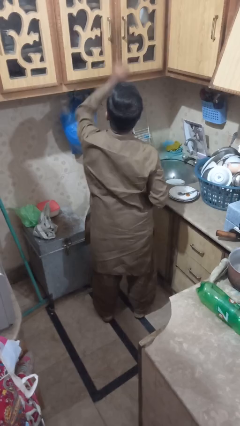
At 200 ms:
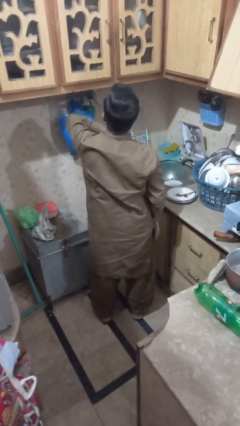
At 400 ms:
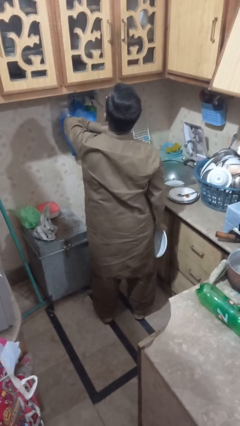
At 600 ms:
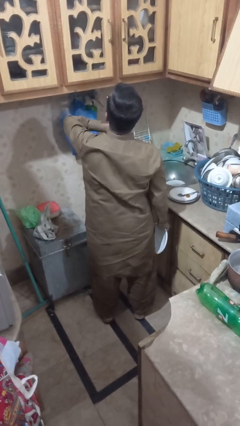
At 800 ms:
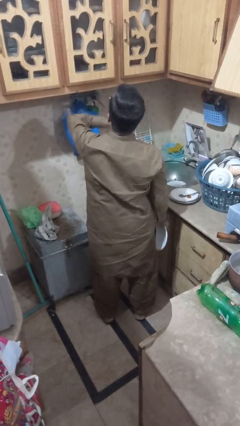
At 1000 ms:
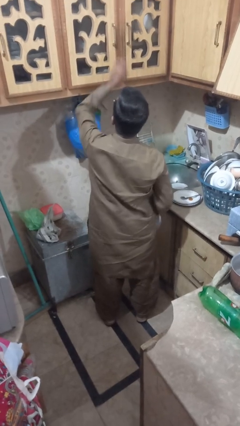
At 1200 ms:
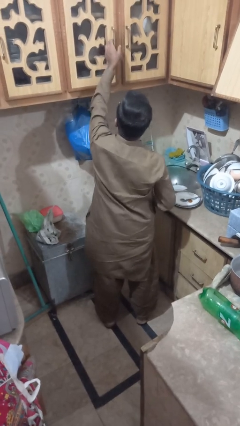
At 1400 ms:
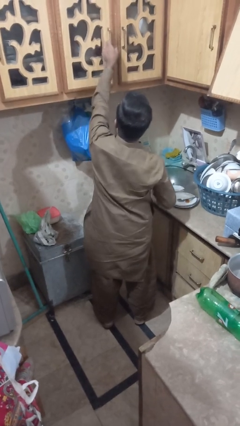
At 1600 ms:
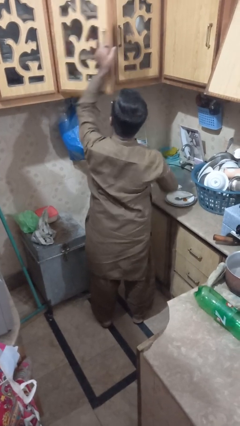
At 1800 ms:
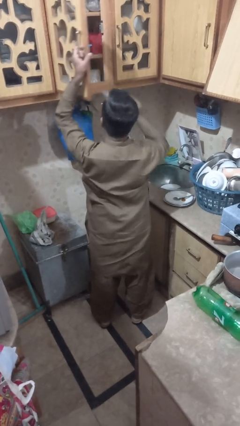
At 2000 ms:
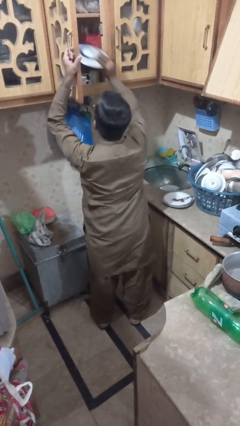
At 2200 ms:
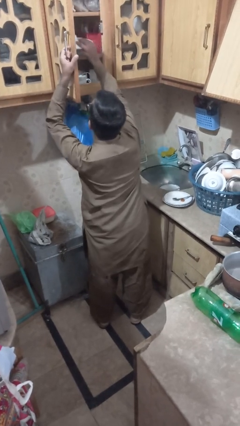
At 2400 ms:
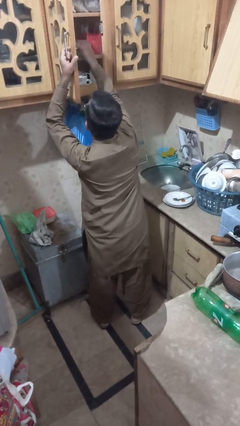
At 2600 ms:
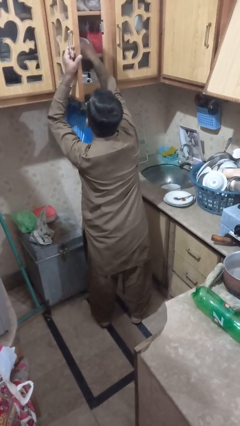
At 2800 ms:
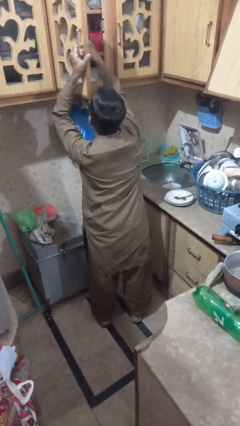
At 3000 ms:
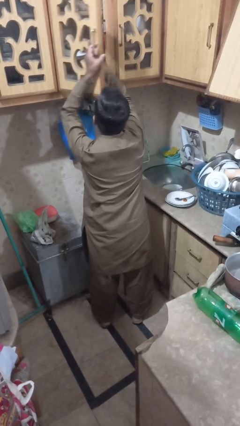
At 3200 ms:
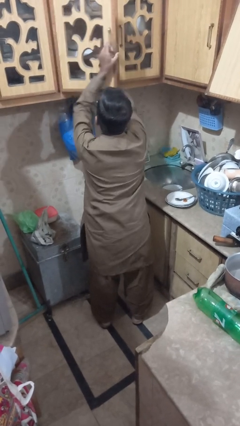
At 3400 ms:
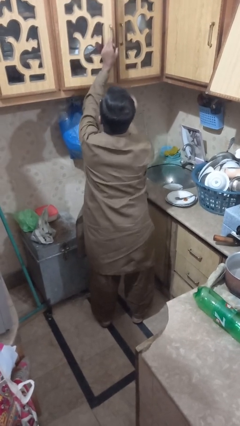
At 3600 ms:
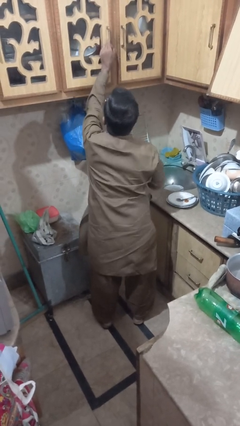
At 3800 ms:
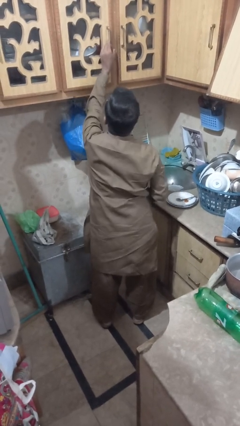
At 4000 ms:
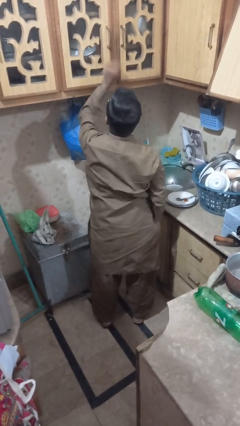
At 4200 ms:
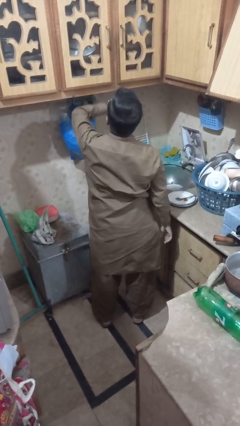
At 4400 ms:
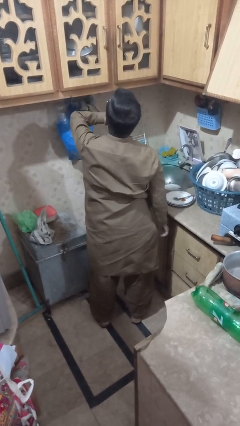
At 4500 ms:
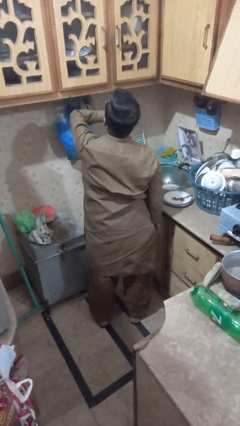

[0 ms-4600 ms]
person puts object in cabinet

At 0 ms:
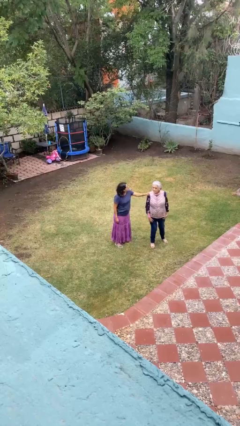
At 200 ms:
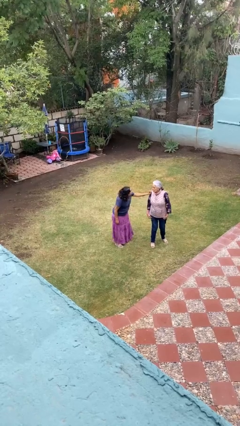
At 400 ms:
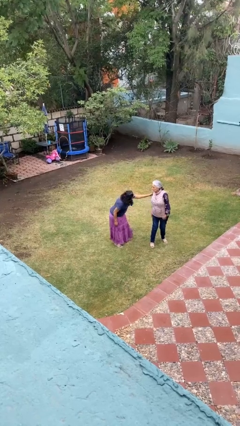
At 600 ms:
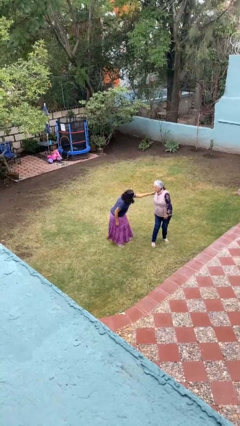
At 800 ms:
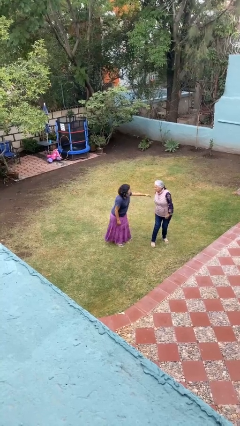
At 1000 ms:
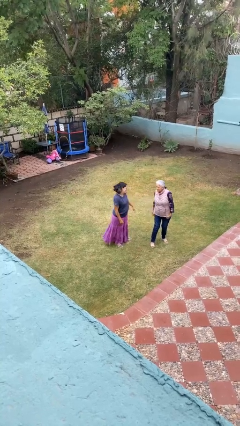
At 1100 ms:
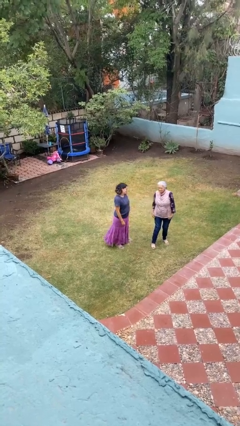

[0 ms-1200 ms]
person spins person around

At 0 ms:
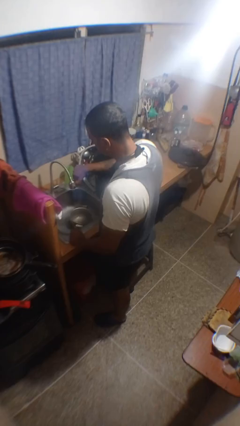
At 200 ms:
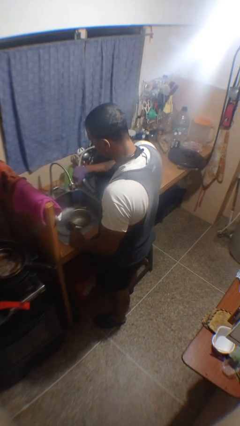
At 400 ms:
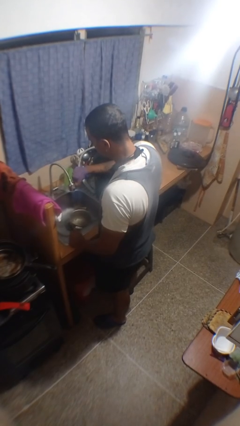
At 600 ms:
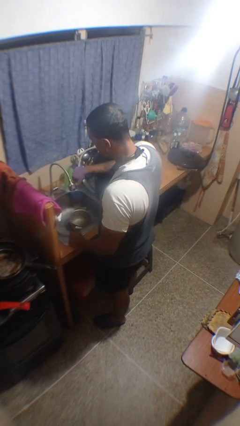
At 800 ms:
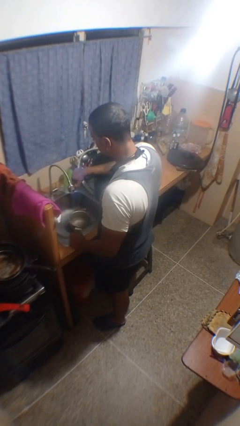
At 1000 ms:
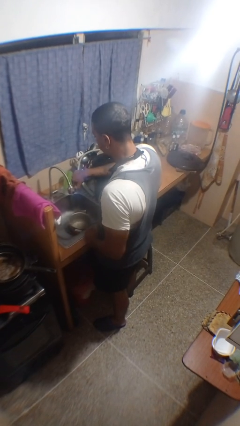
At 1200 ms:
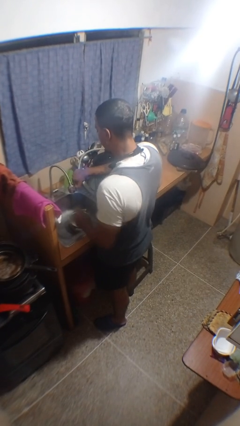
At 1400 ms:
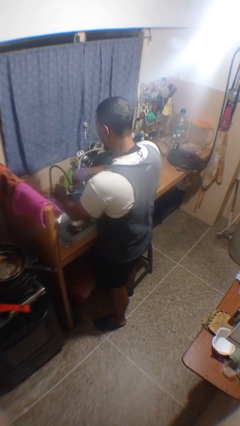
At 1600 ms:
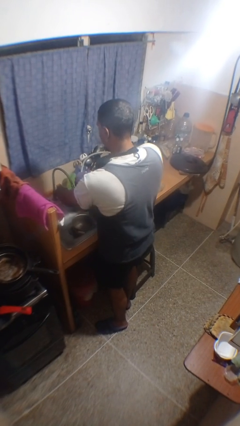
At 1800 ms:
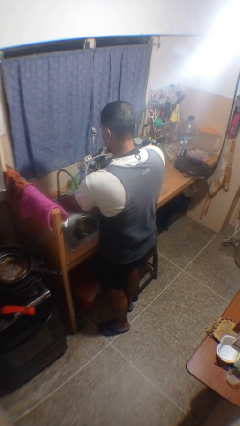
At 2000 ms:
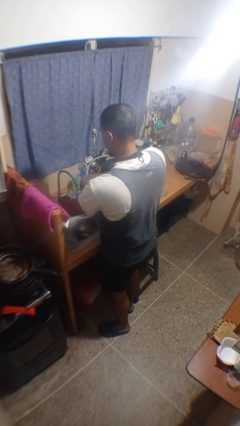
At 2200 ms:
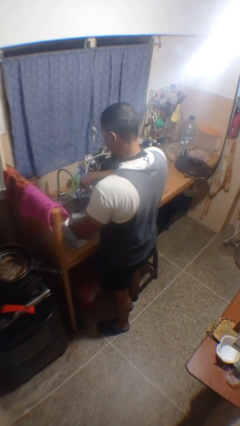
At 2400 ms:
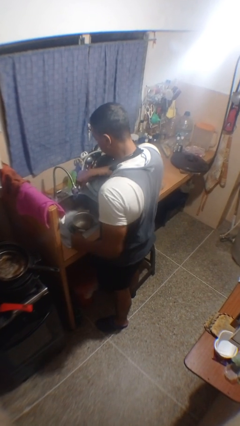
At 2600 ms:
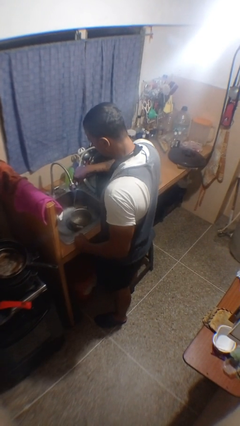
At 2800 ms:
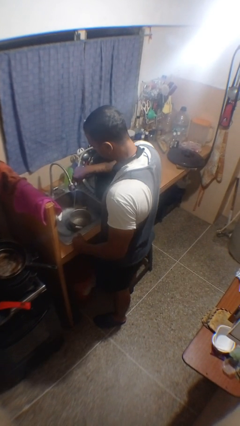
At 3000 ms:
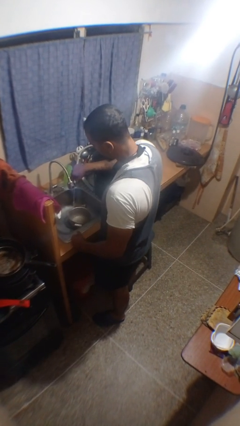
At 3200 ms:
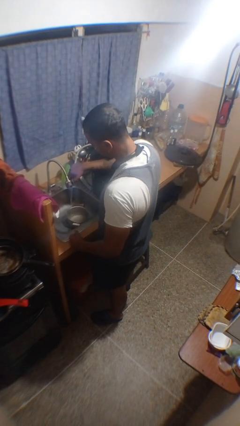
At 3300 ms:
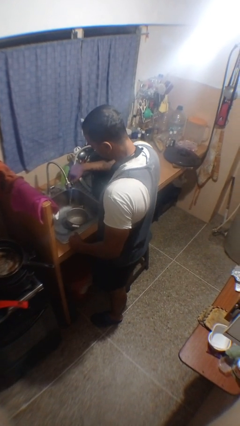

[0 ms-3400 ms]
person turns on faucet

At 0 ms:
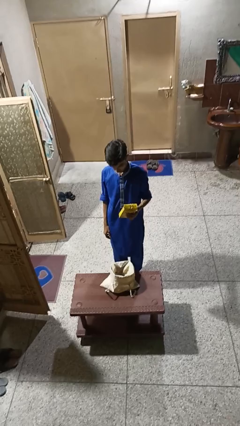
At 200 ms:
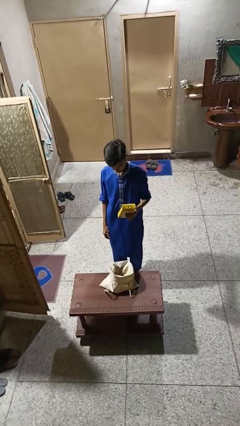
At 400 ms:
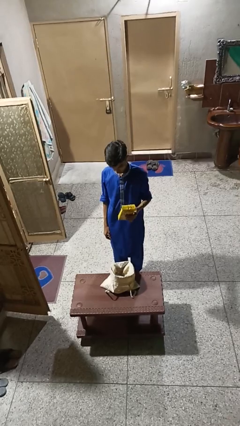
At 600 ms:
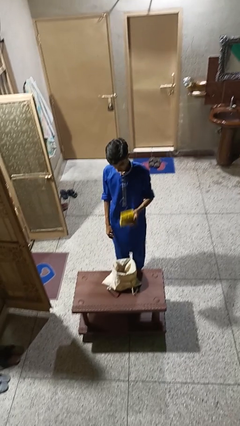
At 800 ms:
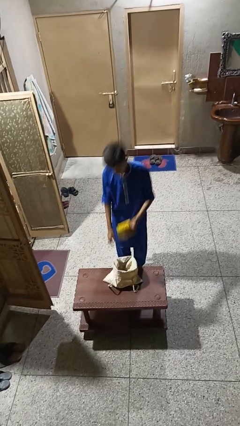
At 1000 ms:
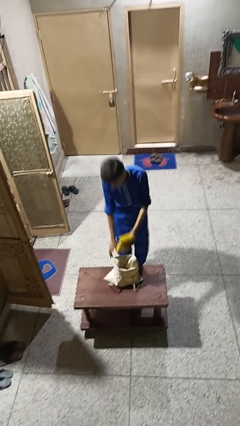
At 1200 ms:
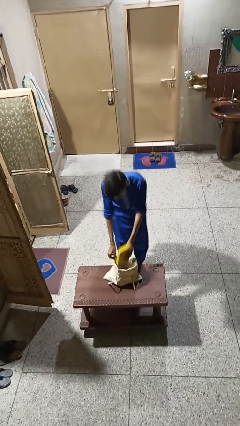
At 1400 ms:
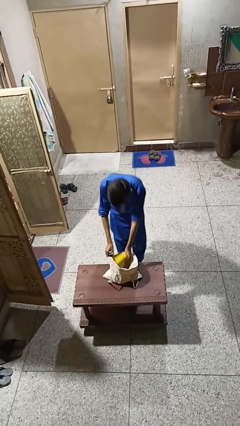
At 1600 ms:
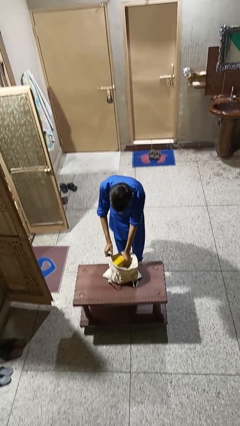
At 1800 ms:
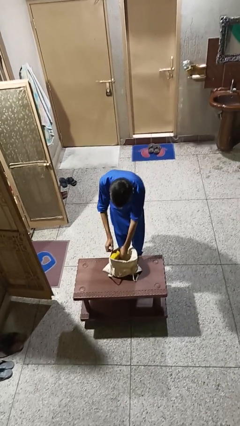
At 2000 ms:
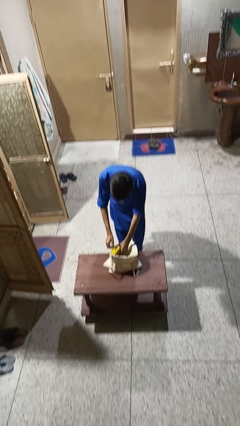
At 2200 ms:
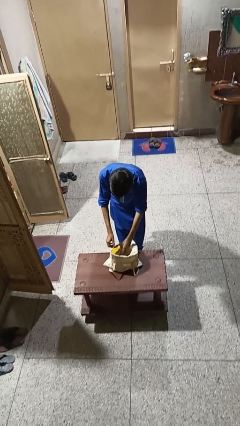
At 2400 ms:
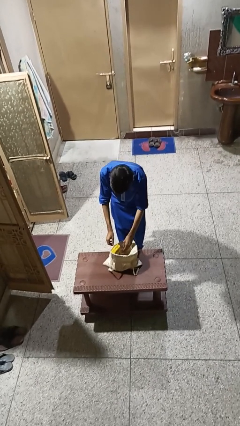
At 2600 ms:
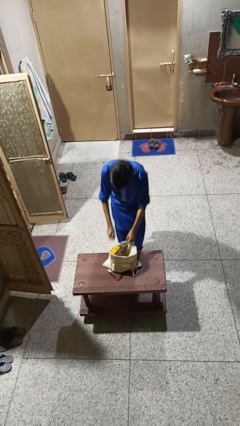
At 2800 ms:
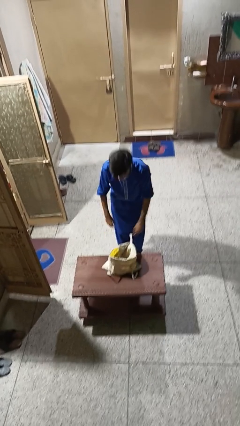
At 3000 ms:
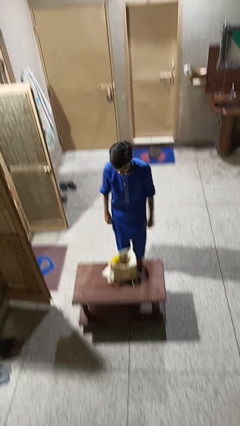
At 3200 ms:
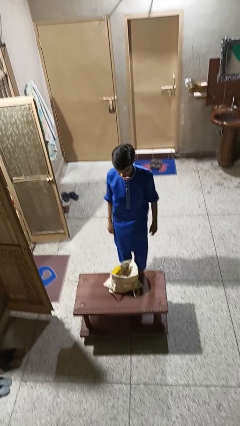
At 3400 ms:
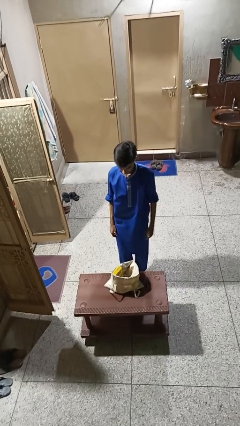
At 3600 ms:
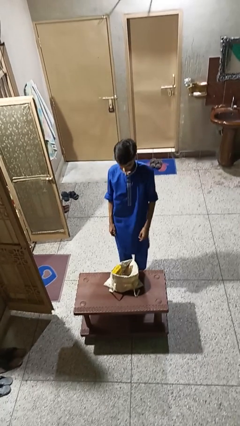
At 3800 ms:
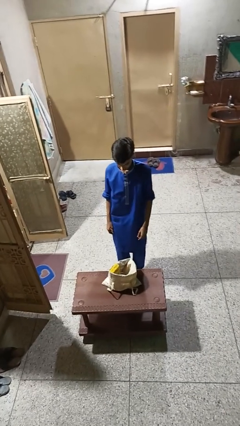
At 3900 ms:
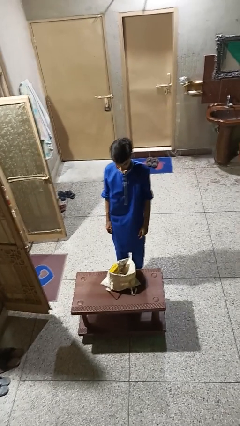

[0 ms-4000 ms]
person puts object into bag

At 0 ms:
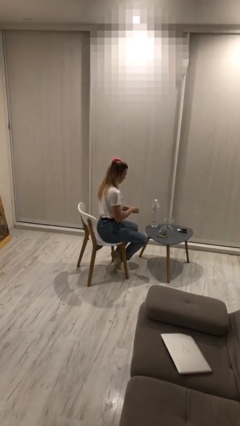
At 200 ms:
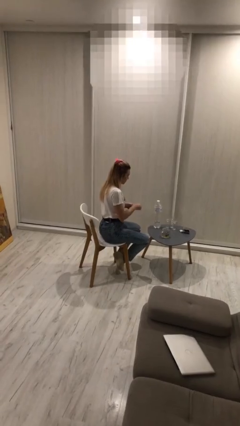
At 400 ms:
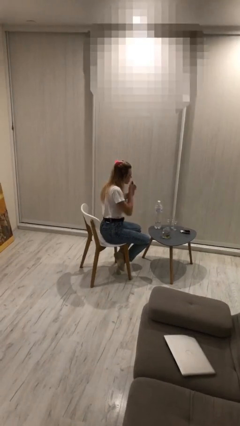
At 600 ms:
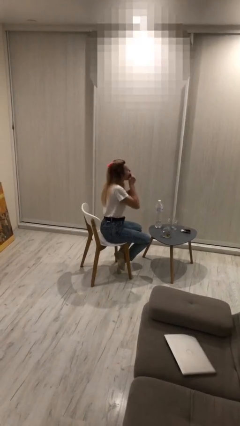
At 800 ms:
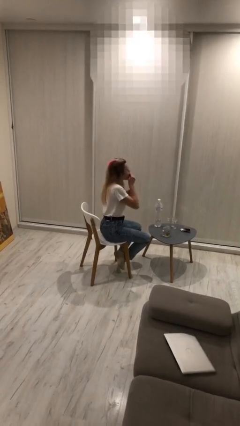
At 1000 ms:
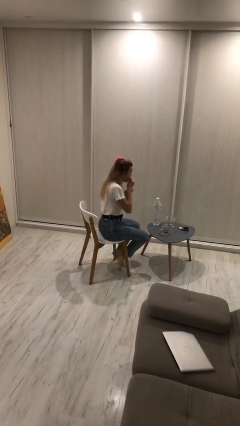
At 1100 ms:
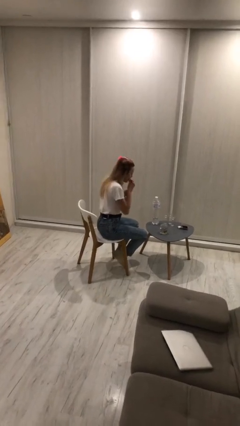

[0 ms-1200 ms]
person takes medicine pills

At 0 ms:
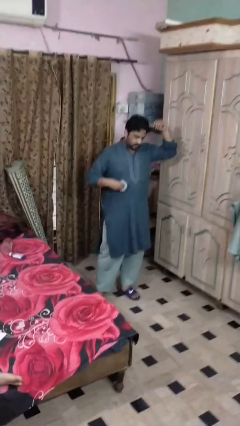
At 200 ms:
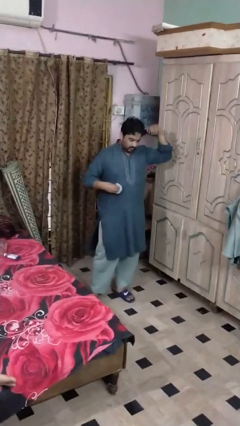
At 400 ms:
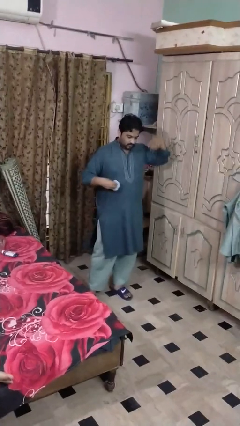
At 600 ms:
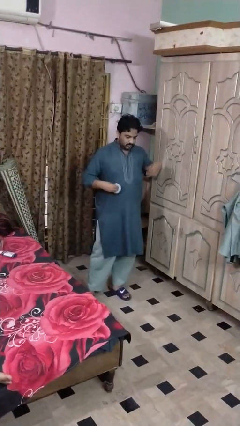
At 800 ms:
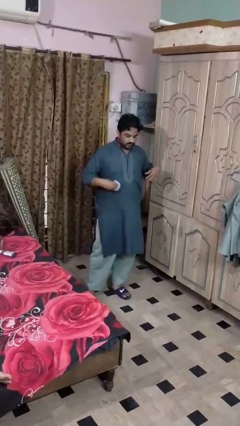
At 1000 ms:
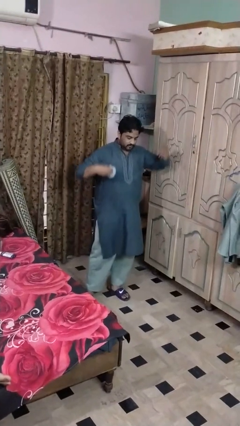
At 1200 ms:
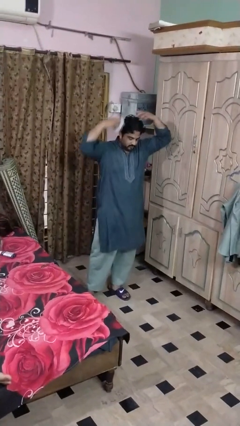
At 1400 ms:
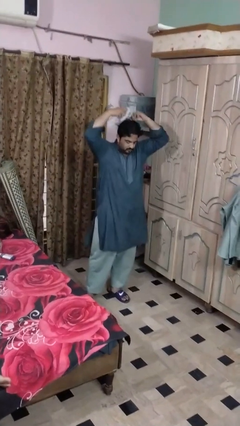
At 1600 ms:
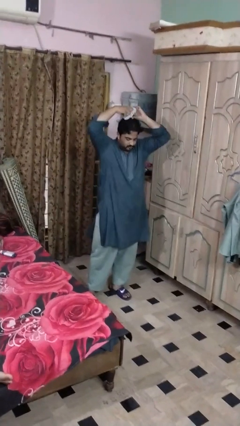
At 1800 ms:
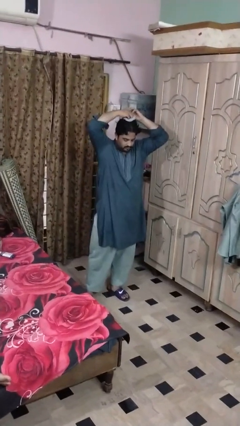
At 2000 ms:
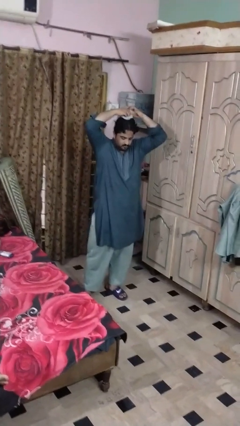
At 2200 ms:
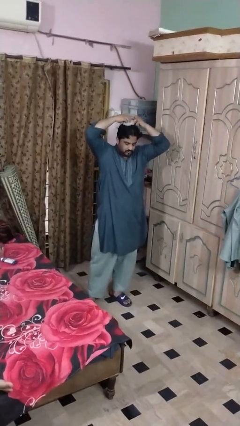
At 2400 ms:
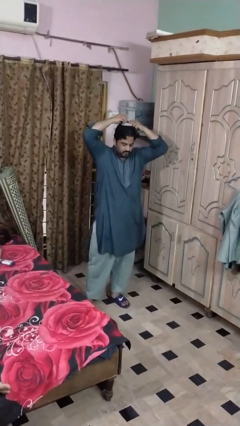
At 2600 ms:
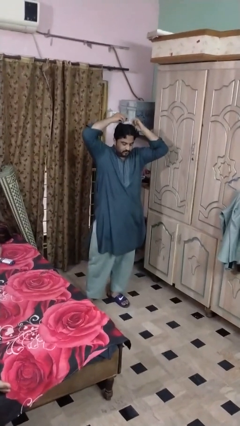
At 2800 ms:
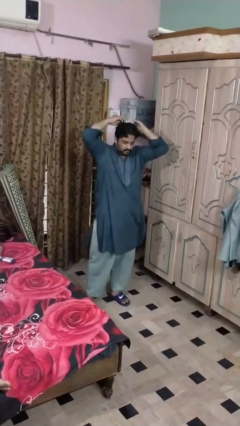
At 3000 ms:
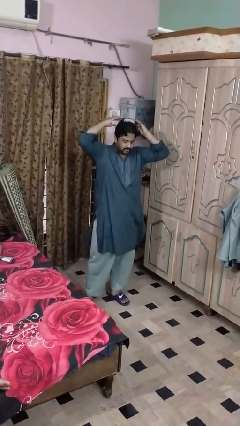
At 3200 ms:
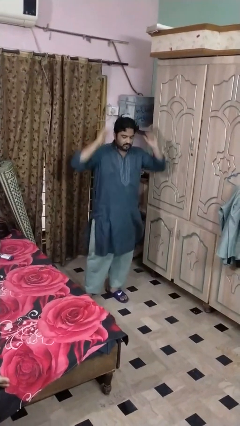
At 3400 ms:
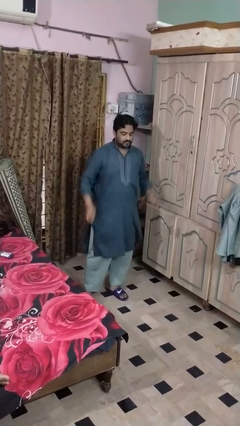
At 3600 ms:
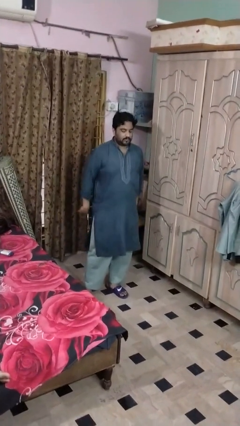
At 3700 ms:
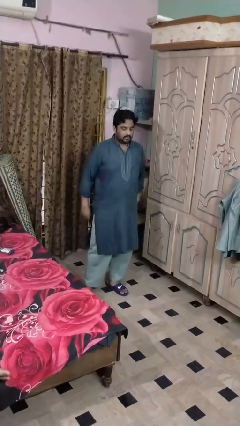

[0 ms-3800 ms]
person puts hair in ponytail
